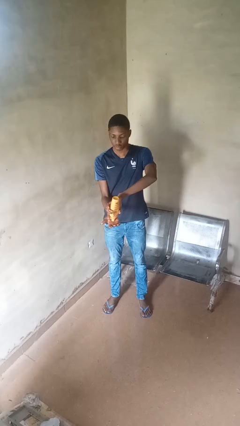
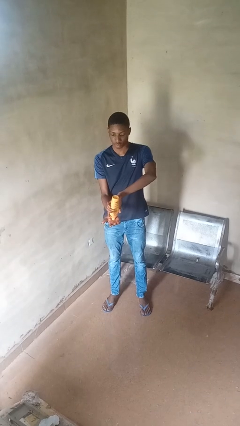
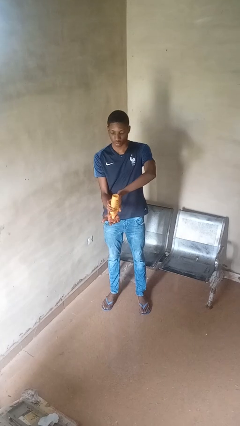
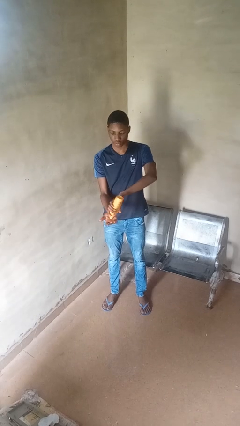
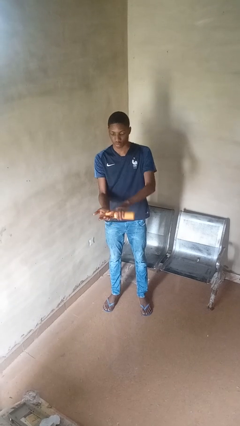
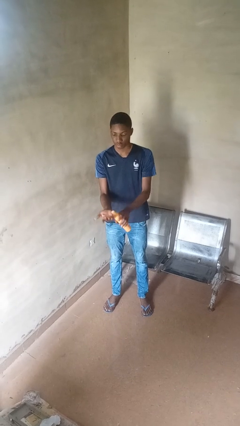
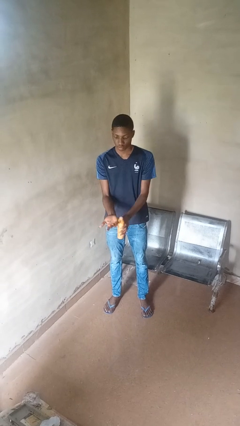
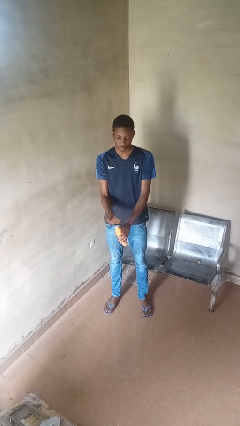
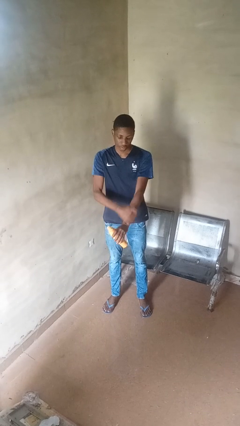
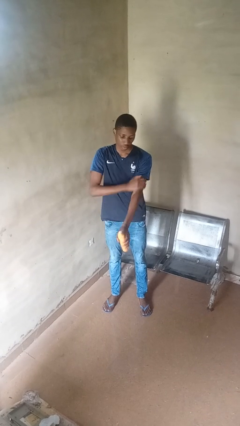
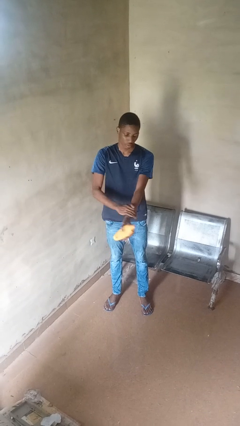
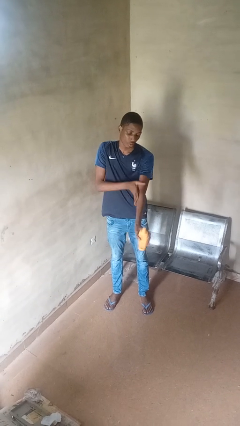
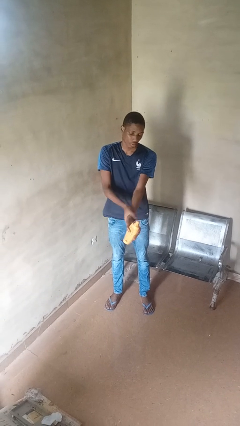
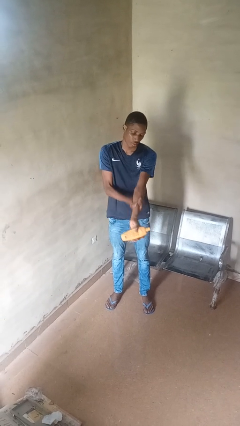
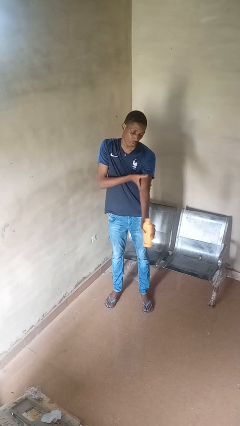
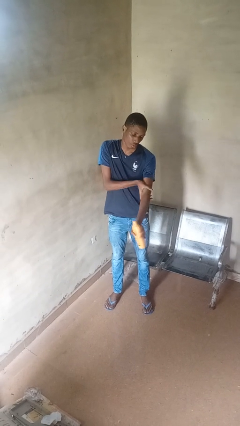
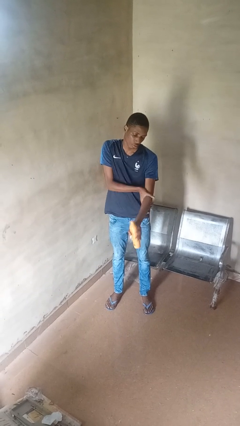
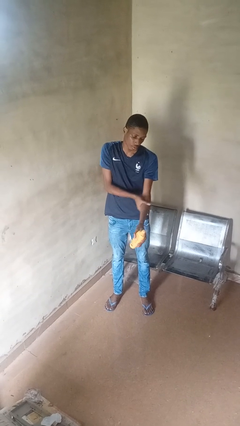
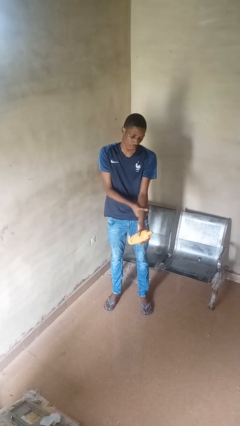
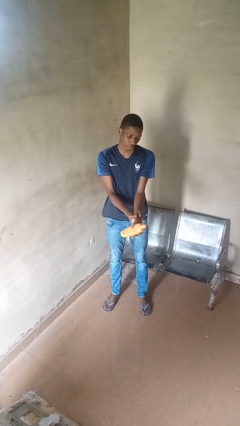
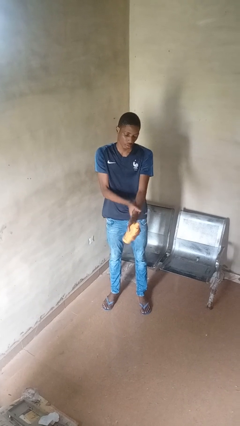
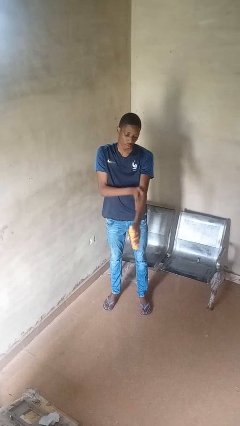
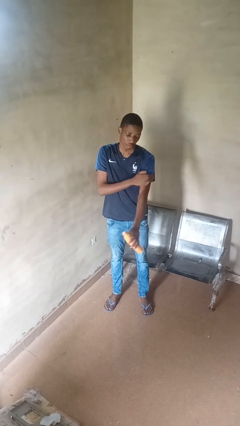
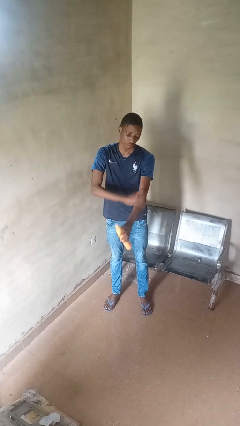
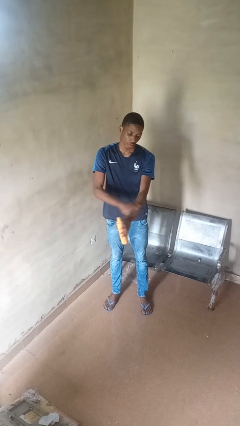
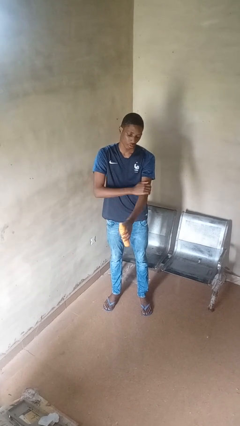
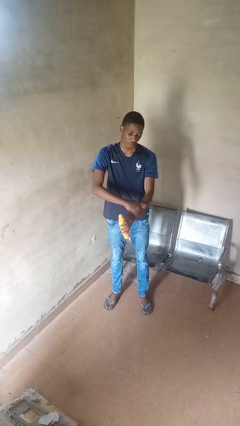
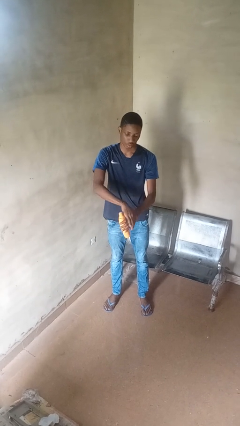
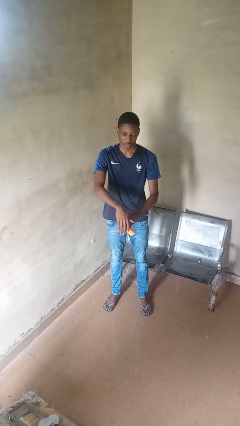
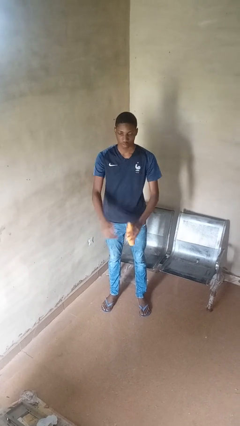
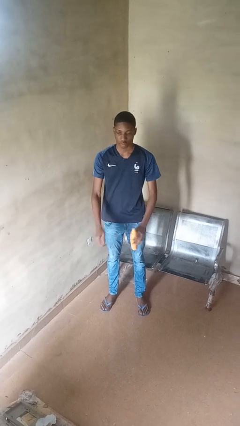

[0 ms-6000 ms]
person applies sunscreen

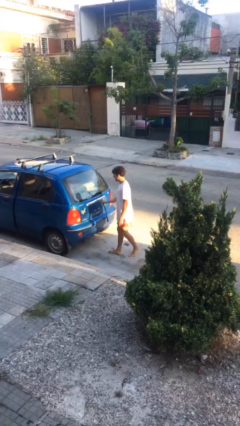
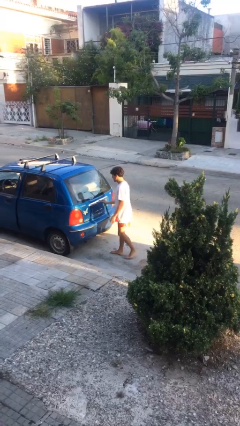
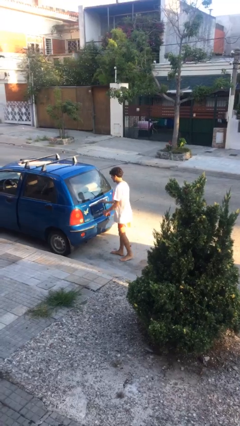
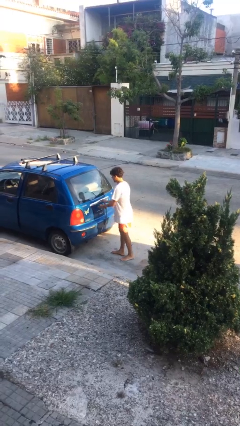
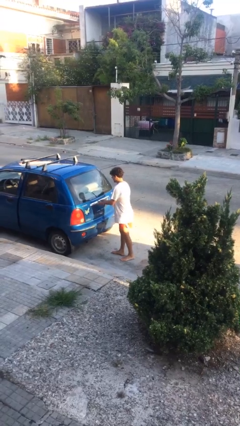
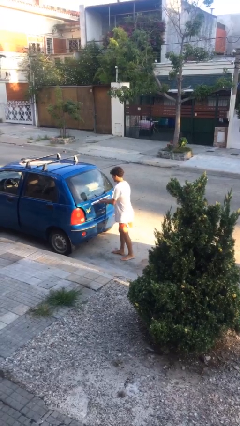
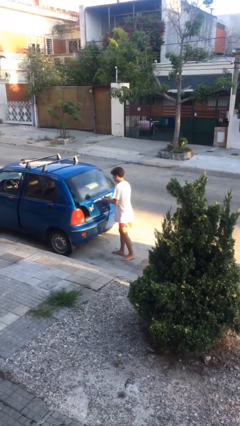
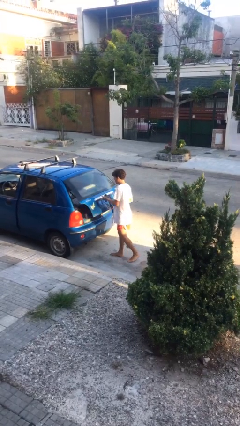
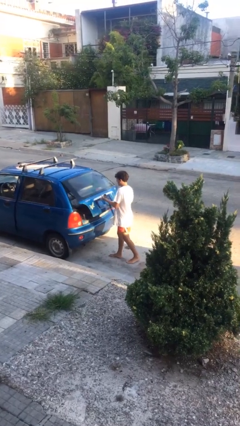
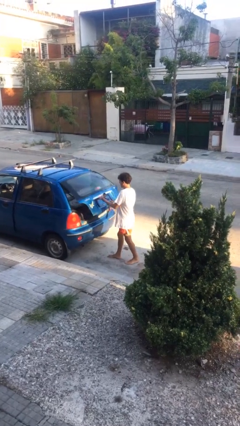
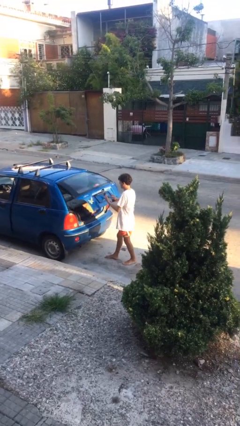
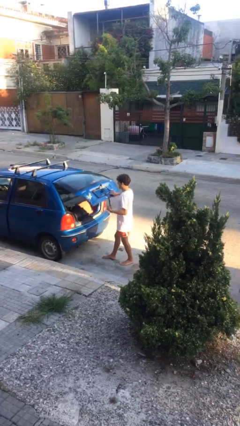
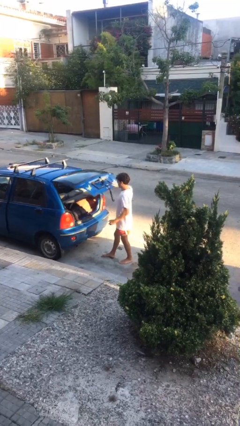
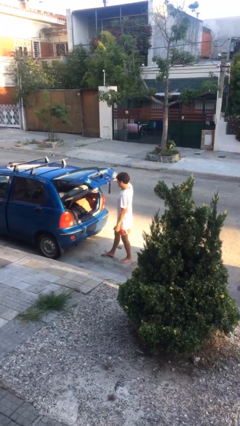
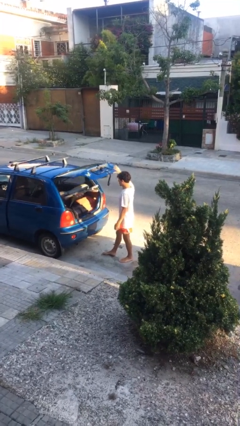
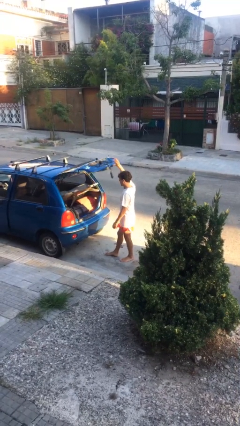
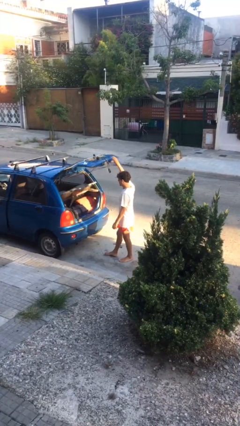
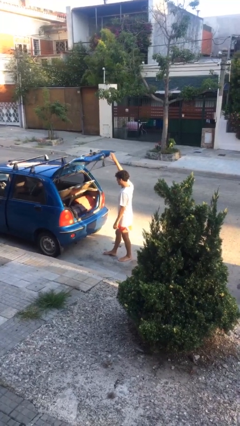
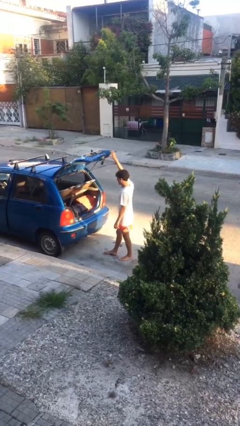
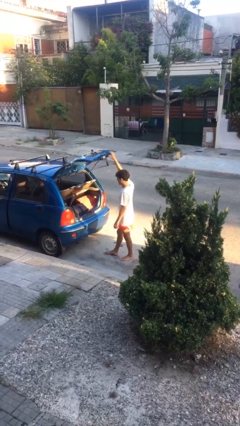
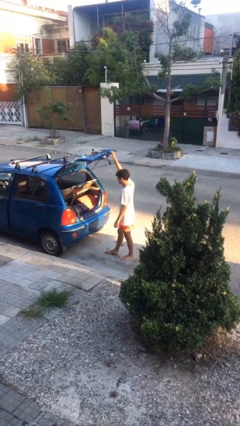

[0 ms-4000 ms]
person opens car trunk

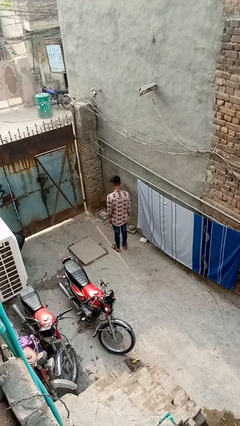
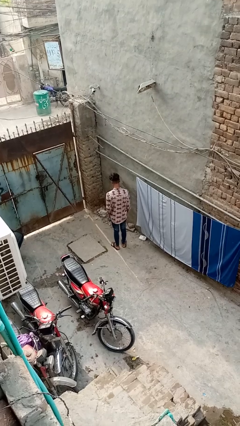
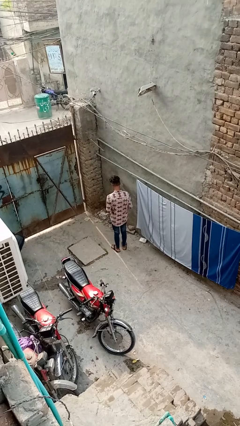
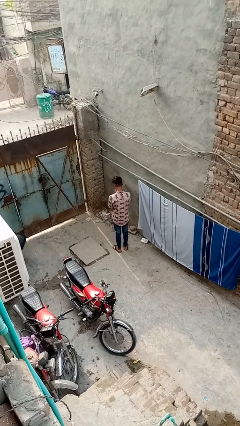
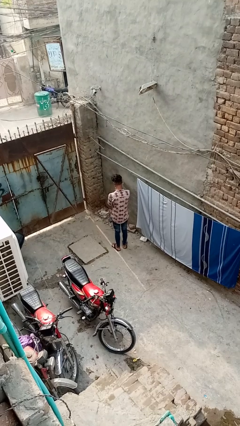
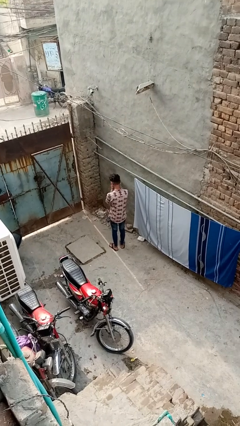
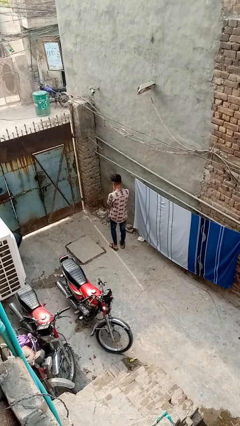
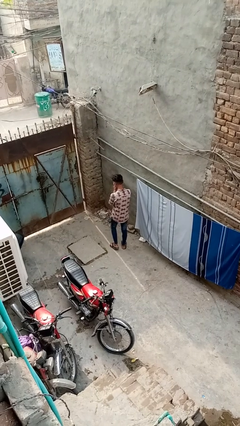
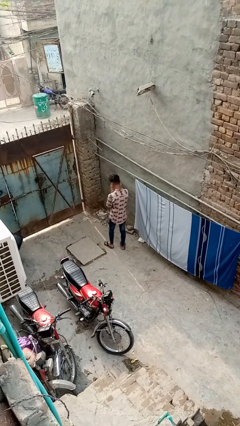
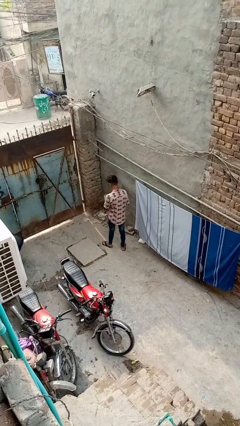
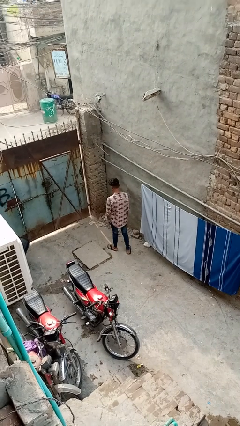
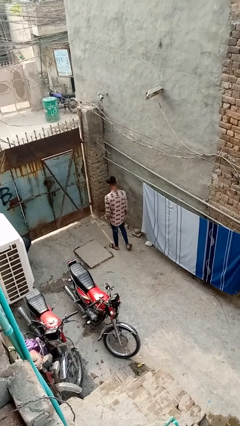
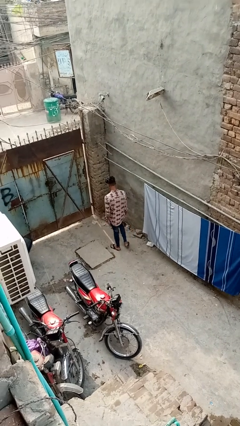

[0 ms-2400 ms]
person blows into hands

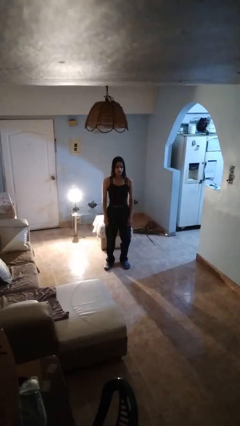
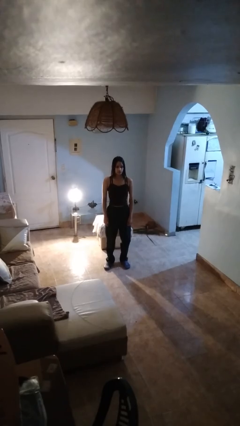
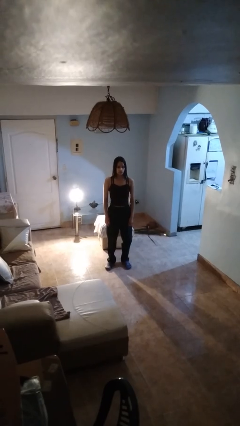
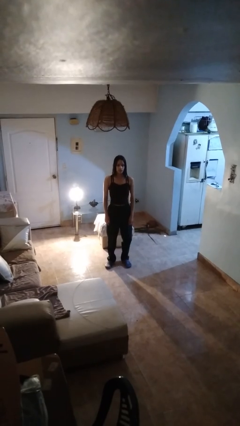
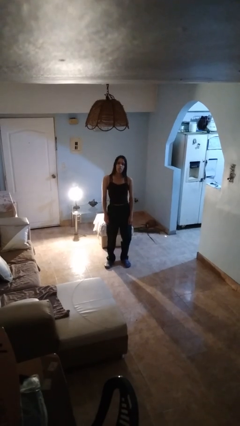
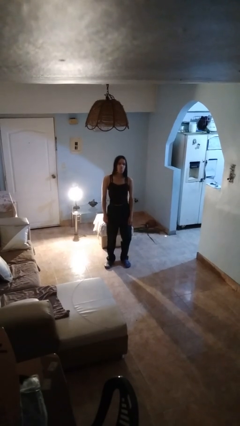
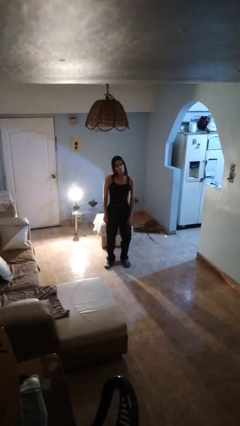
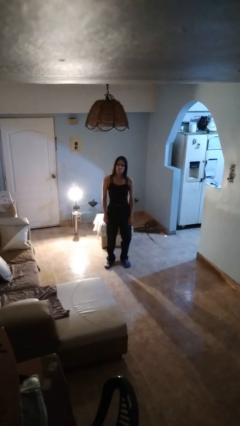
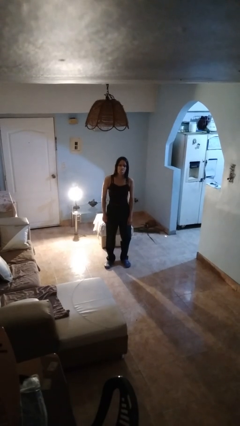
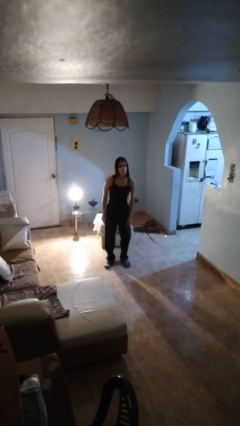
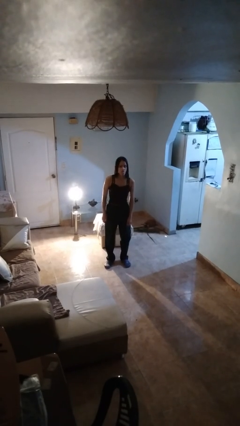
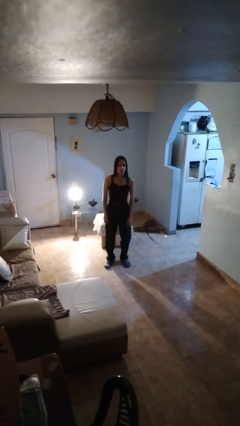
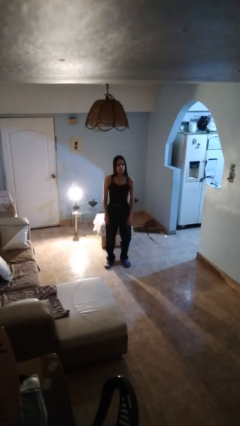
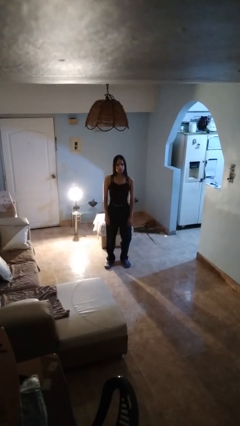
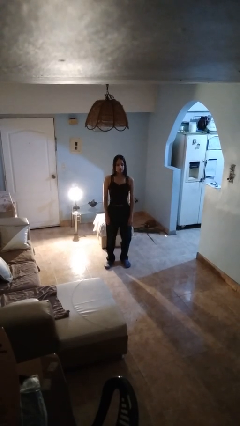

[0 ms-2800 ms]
person sticks out tongue

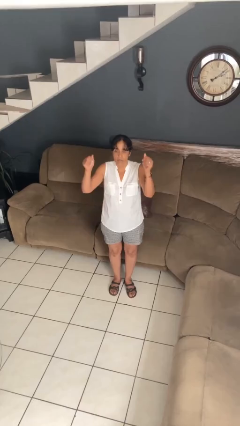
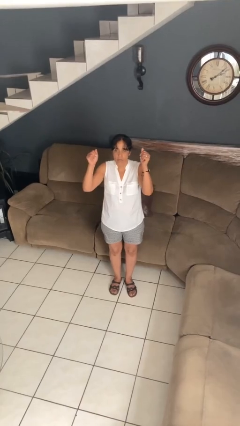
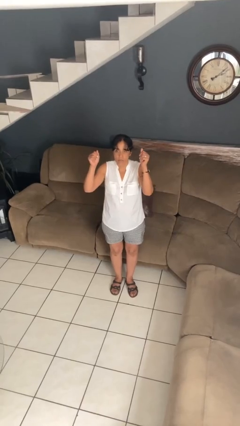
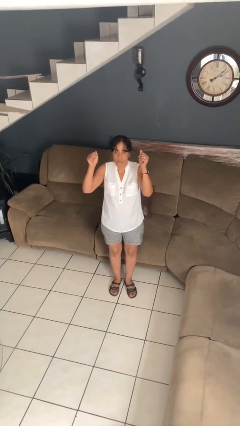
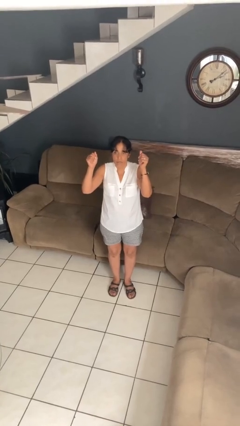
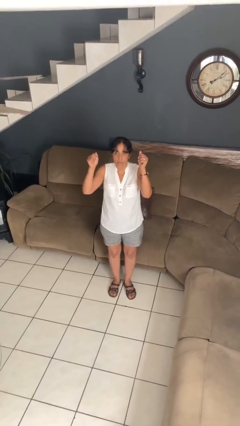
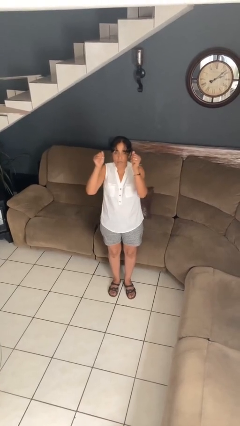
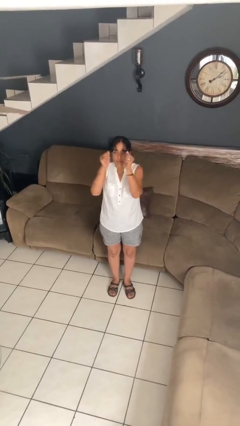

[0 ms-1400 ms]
person gestures zoom in

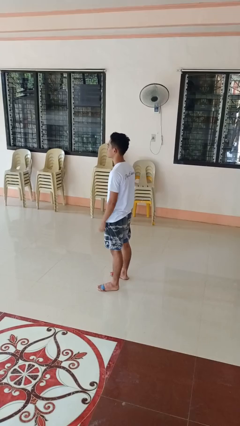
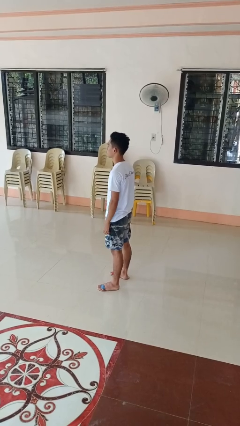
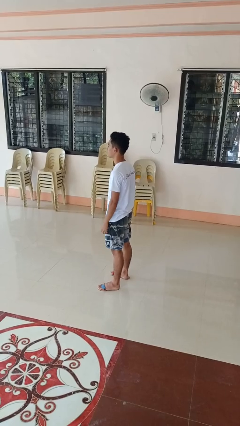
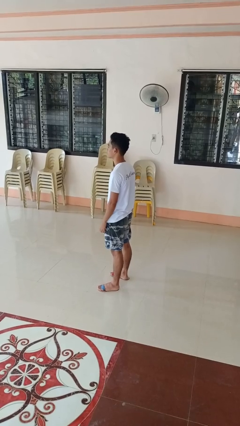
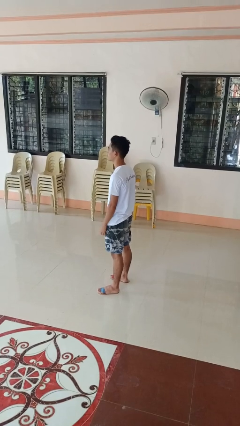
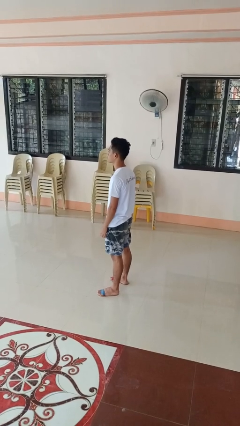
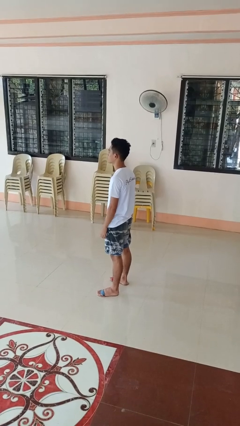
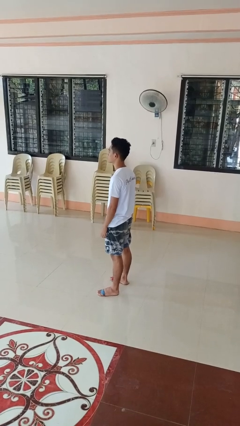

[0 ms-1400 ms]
person takes off ring
